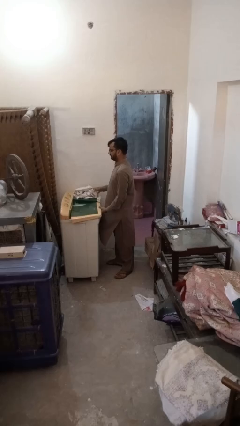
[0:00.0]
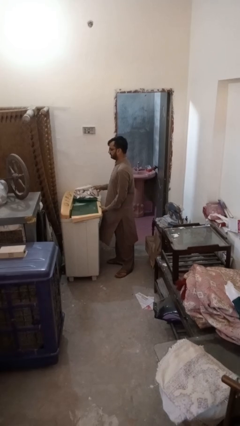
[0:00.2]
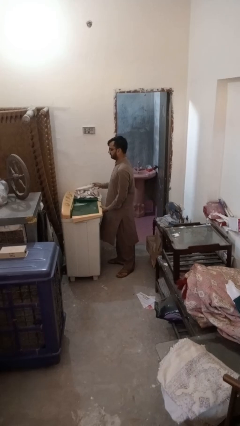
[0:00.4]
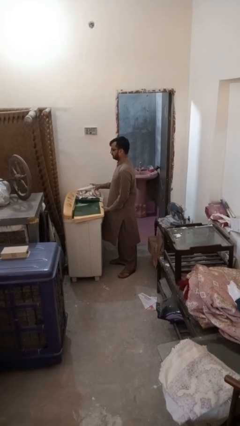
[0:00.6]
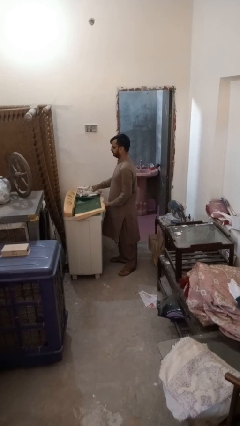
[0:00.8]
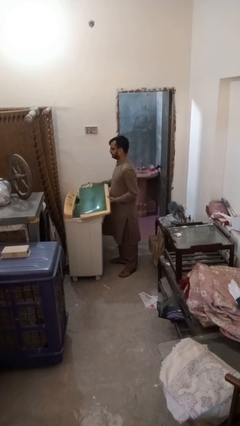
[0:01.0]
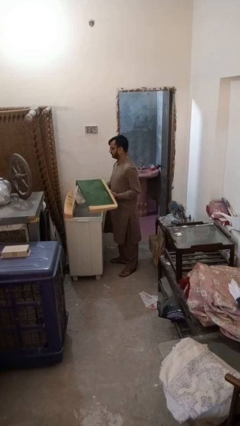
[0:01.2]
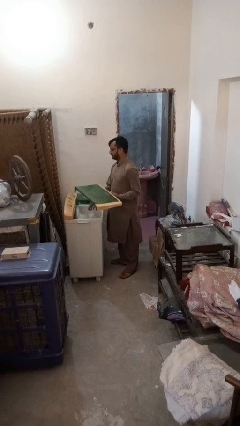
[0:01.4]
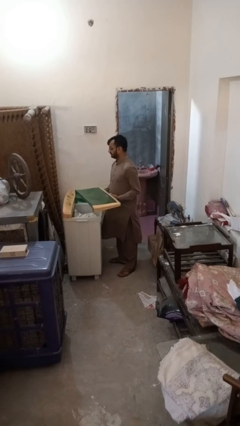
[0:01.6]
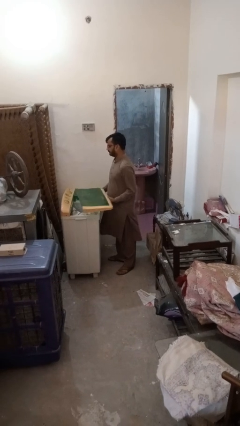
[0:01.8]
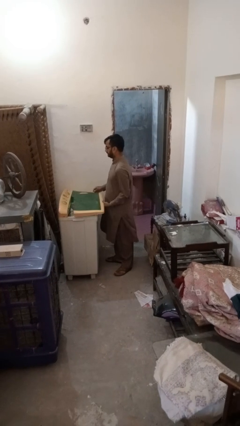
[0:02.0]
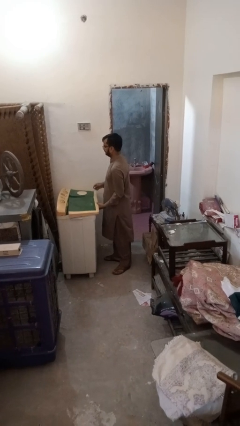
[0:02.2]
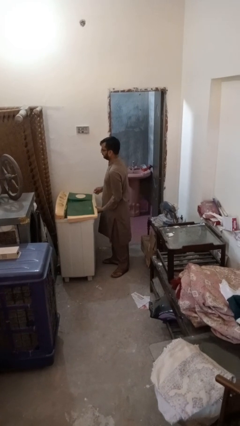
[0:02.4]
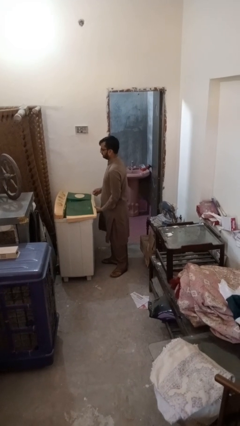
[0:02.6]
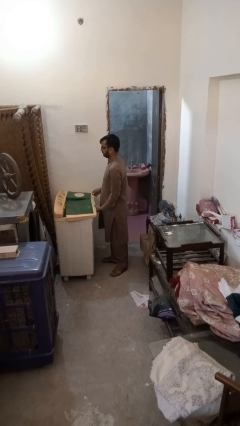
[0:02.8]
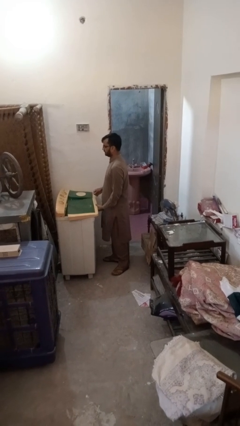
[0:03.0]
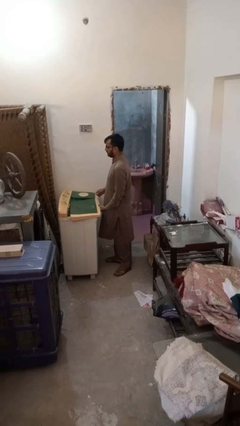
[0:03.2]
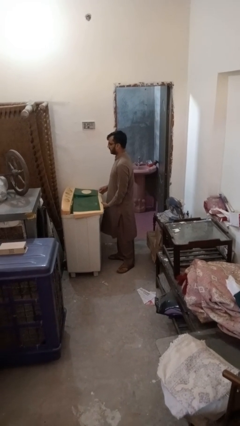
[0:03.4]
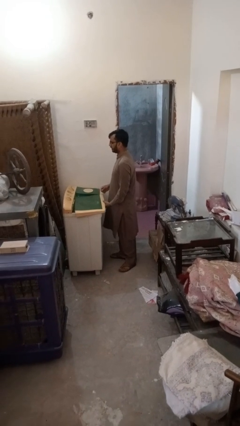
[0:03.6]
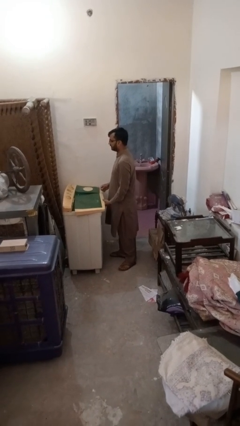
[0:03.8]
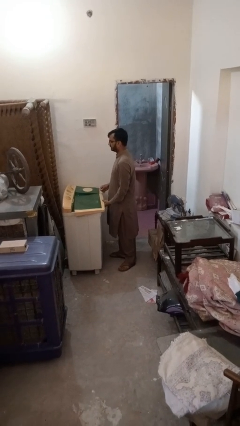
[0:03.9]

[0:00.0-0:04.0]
person loads clotheswasher

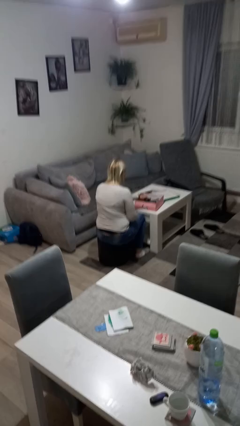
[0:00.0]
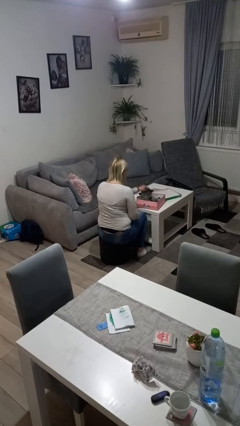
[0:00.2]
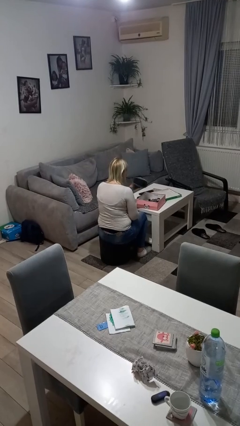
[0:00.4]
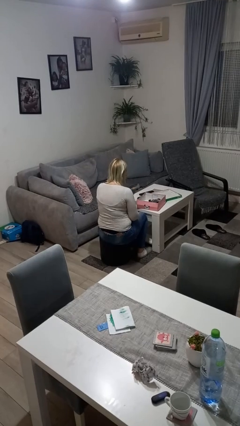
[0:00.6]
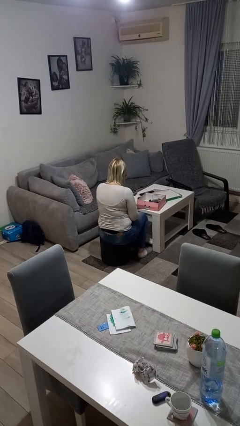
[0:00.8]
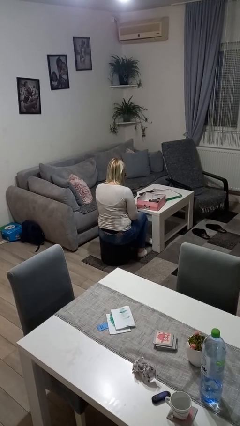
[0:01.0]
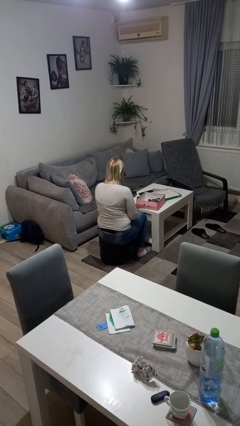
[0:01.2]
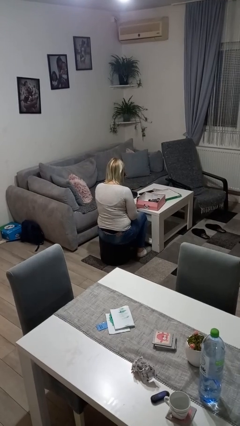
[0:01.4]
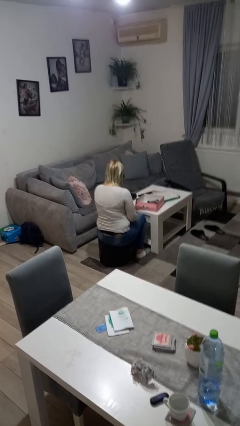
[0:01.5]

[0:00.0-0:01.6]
person takes object from box

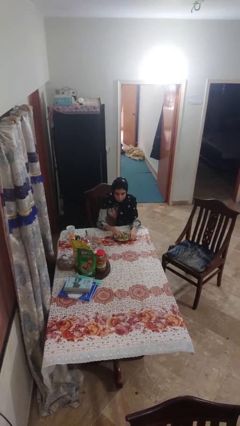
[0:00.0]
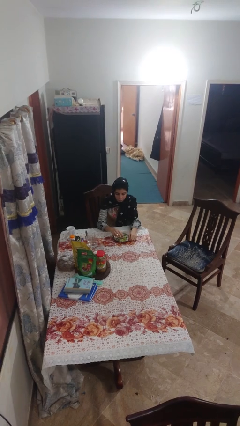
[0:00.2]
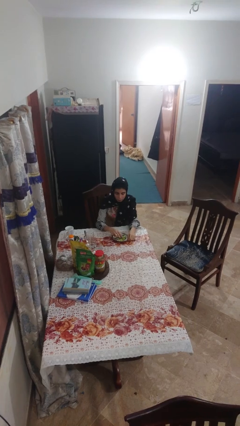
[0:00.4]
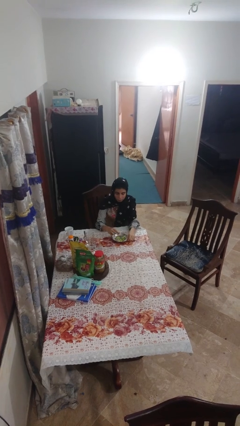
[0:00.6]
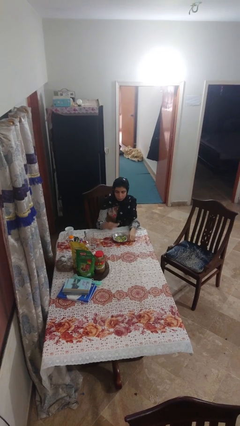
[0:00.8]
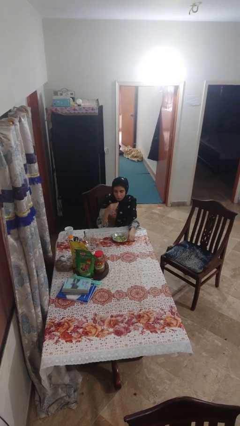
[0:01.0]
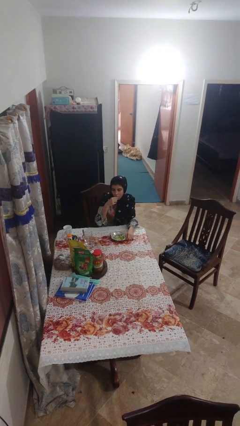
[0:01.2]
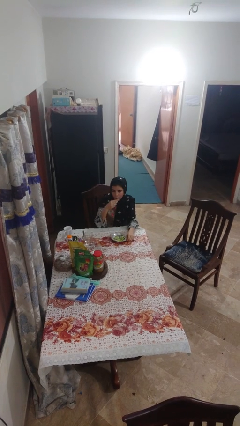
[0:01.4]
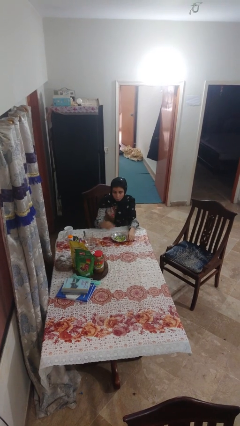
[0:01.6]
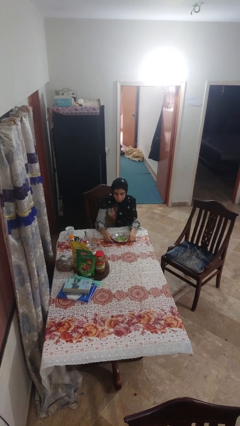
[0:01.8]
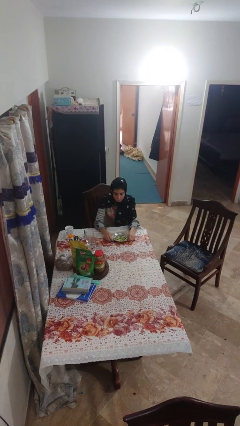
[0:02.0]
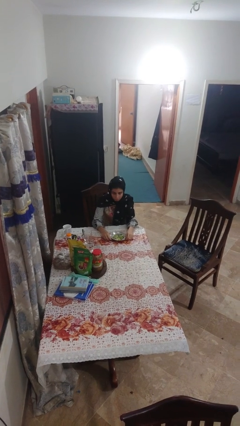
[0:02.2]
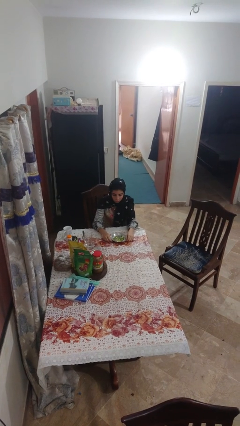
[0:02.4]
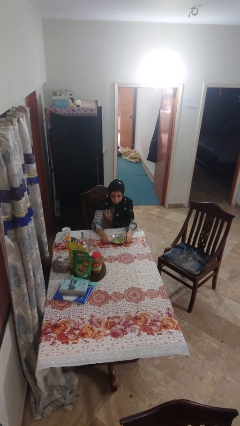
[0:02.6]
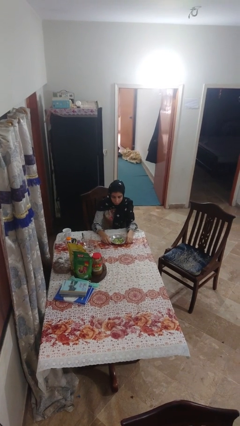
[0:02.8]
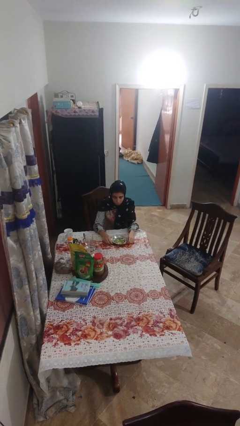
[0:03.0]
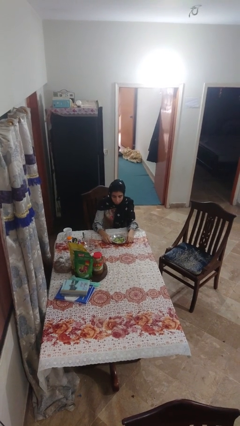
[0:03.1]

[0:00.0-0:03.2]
person eats with hands

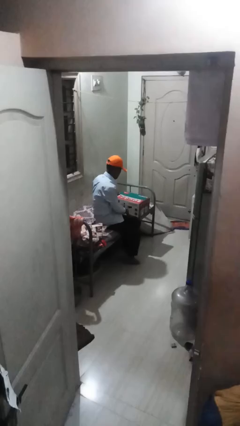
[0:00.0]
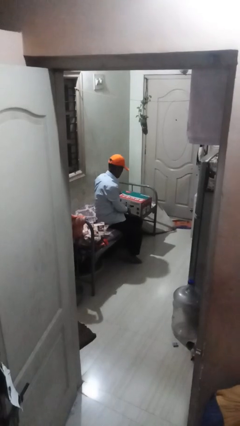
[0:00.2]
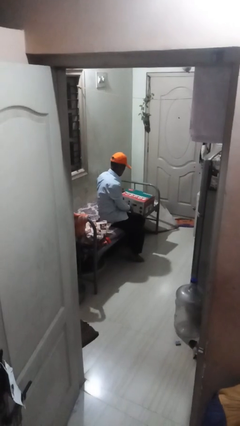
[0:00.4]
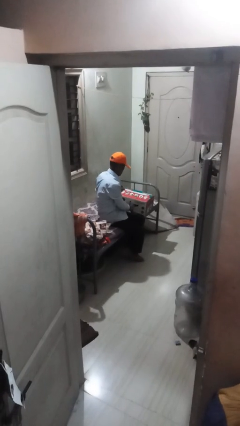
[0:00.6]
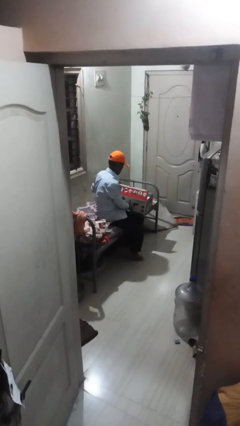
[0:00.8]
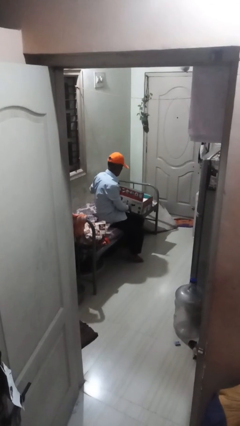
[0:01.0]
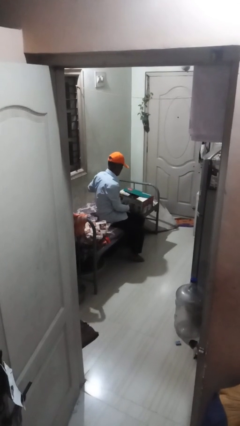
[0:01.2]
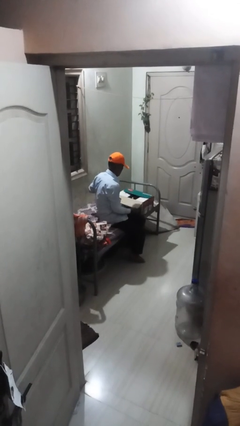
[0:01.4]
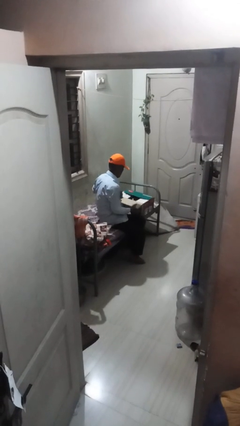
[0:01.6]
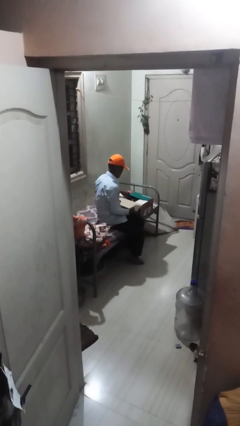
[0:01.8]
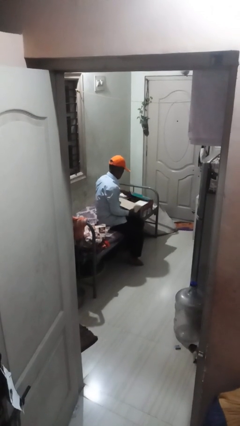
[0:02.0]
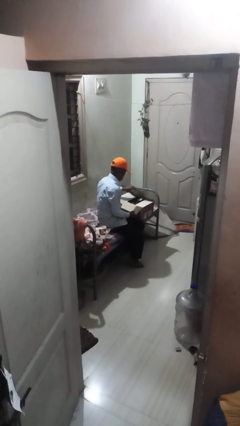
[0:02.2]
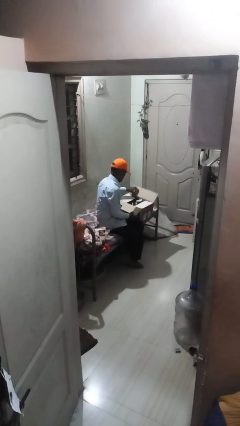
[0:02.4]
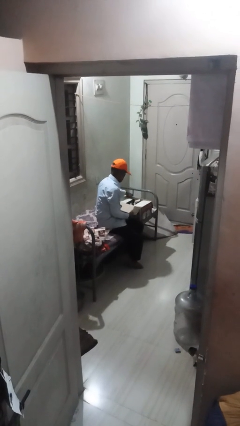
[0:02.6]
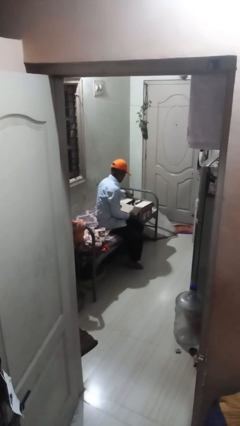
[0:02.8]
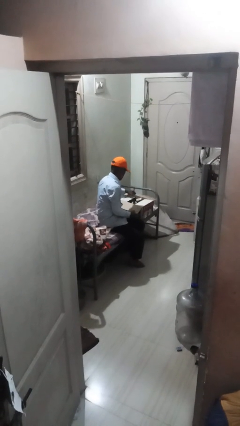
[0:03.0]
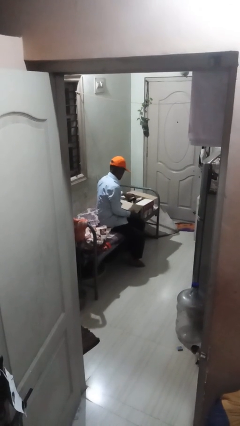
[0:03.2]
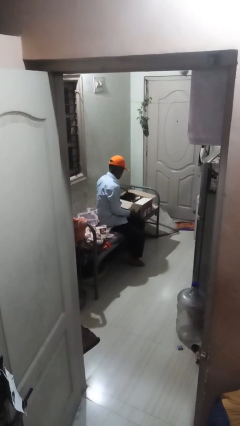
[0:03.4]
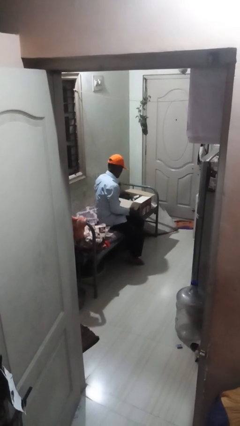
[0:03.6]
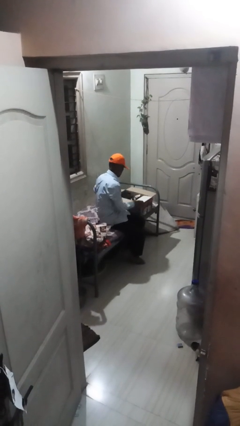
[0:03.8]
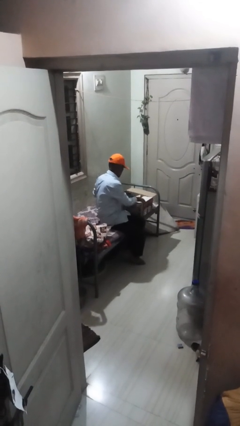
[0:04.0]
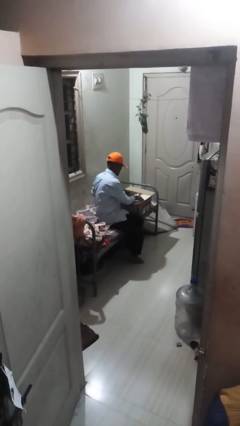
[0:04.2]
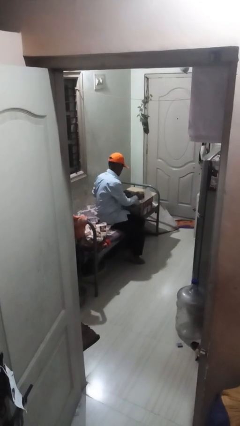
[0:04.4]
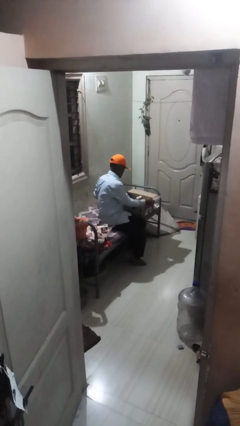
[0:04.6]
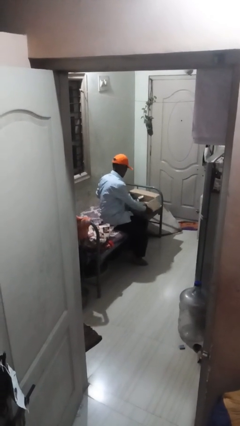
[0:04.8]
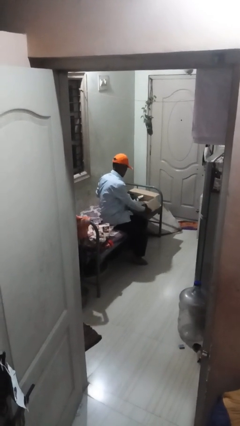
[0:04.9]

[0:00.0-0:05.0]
person opens box

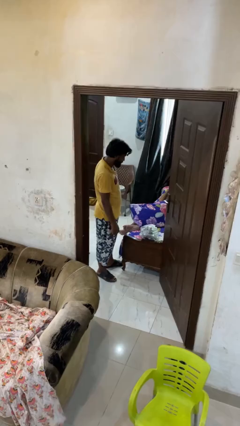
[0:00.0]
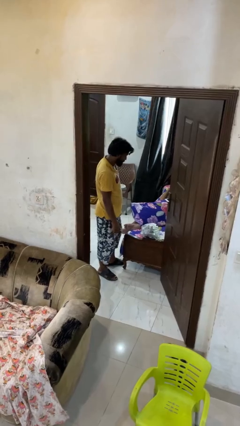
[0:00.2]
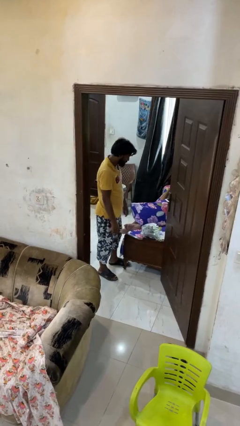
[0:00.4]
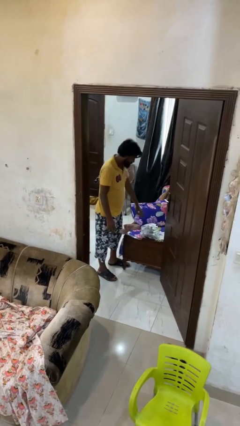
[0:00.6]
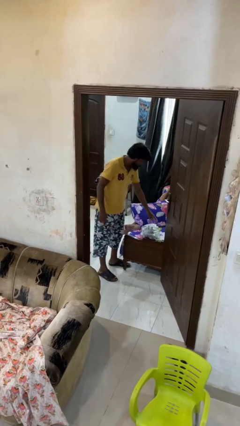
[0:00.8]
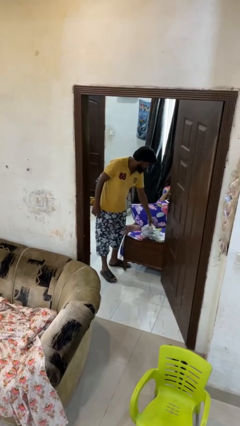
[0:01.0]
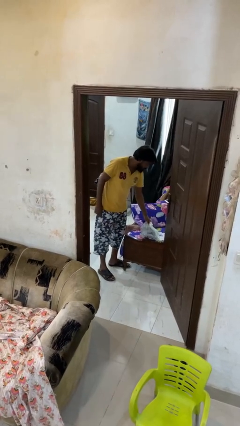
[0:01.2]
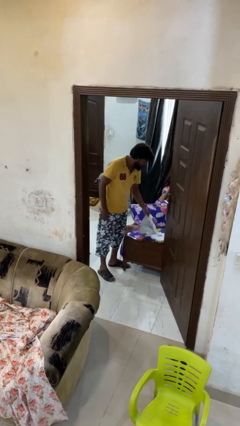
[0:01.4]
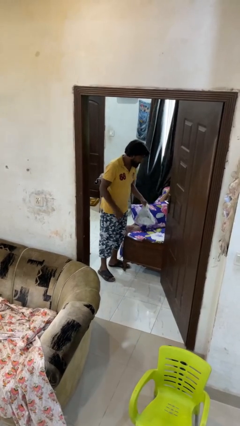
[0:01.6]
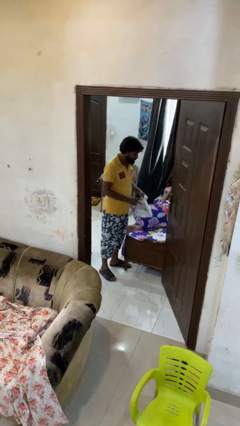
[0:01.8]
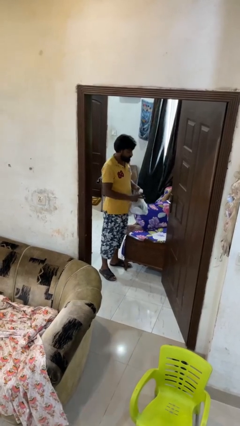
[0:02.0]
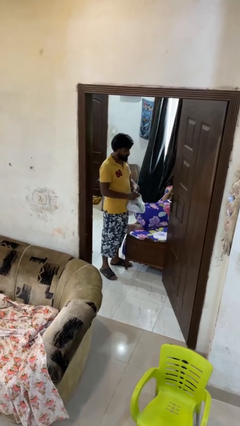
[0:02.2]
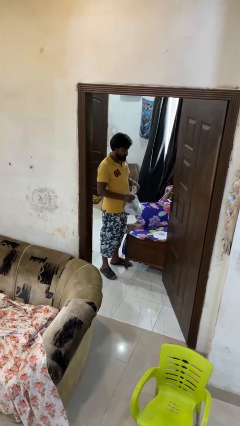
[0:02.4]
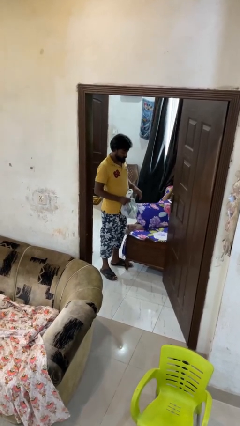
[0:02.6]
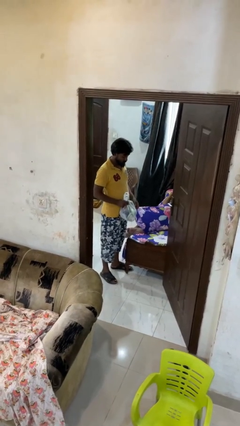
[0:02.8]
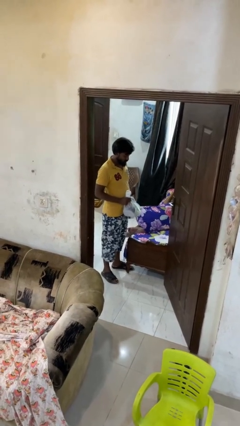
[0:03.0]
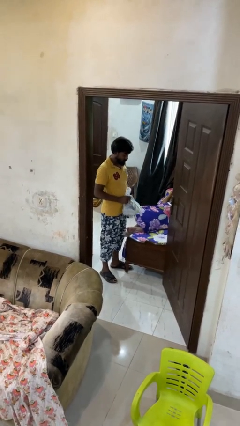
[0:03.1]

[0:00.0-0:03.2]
person picks up object from bed

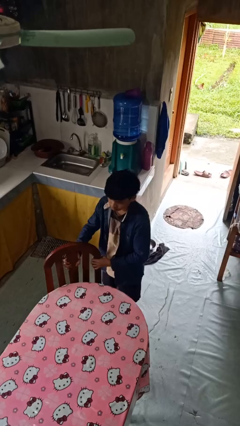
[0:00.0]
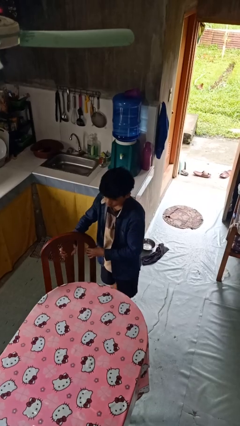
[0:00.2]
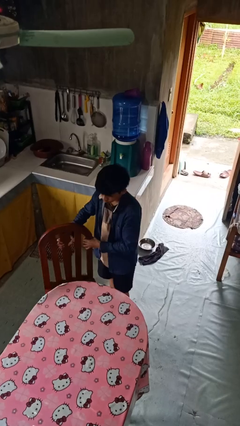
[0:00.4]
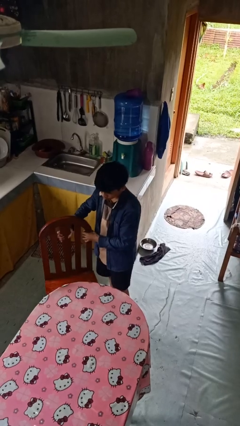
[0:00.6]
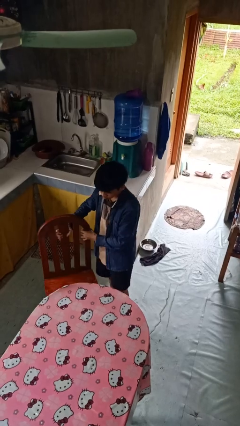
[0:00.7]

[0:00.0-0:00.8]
person pulls out chair
